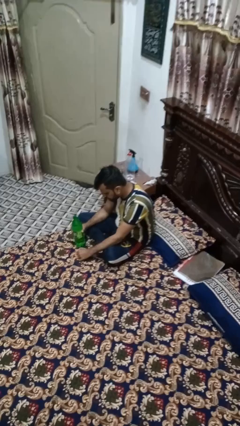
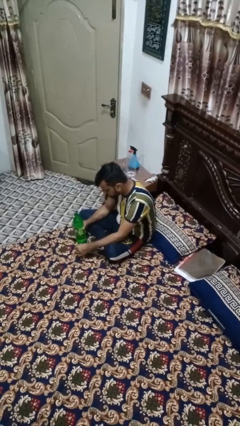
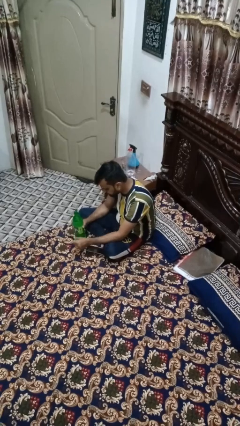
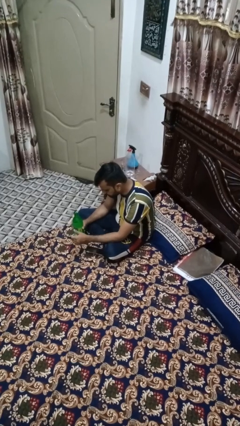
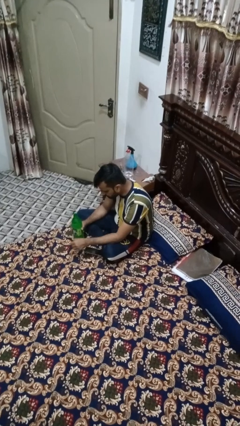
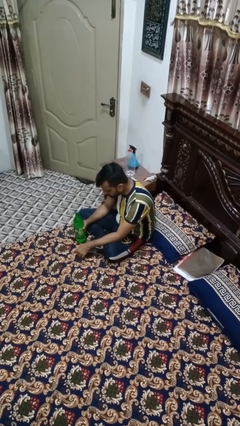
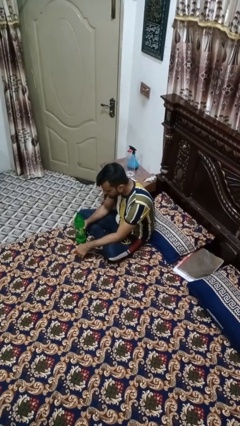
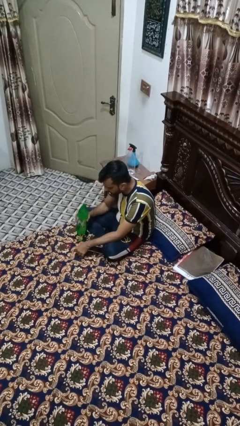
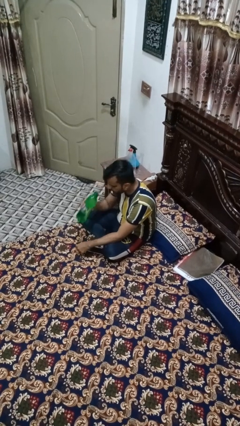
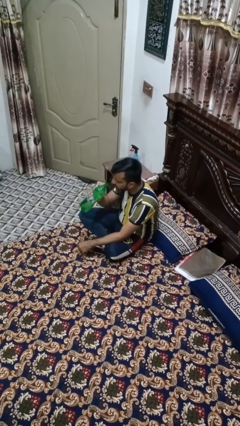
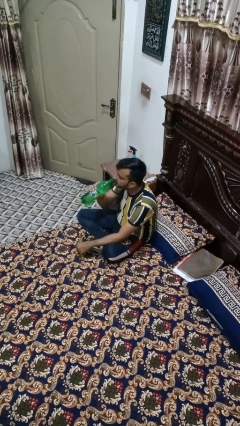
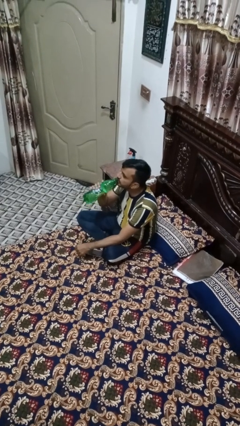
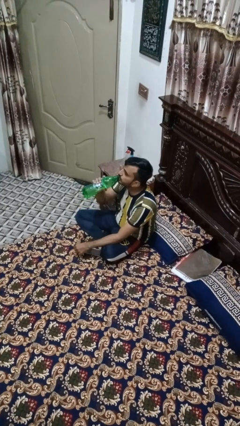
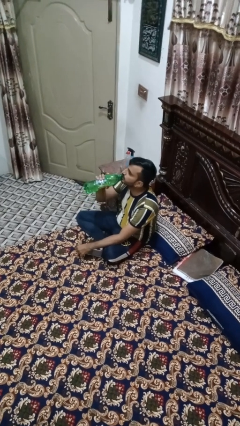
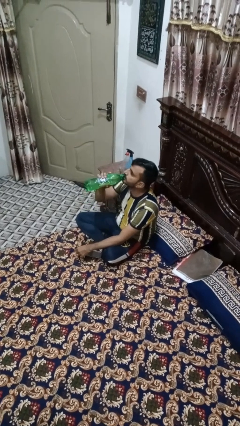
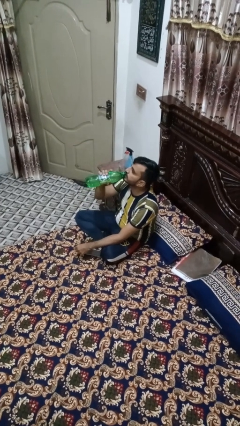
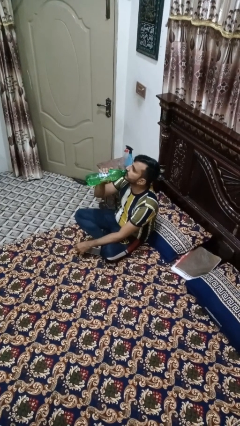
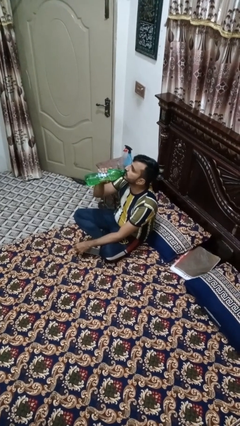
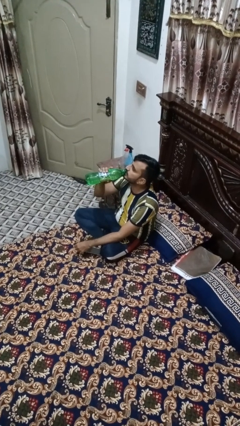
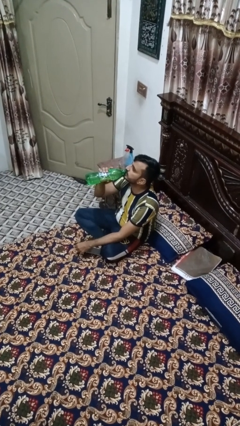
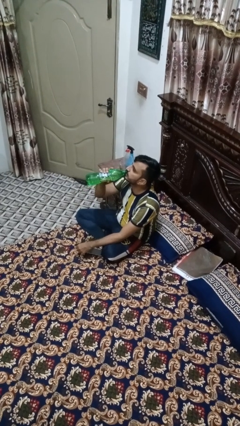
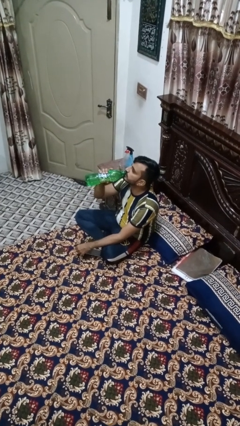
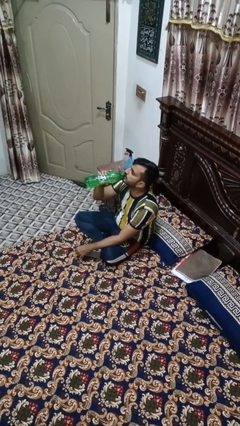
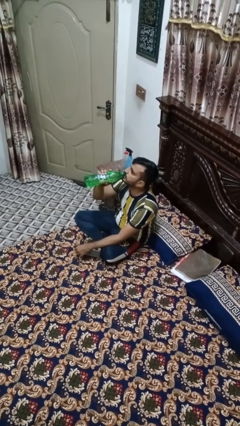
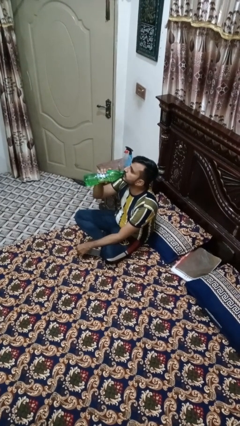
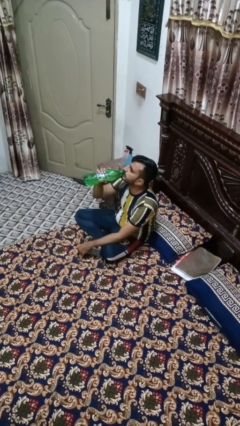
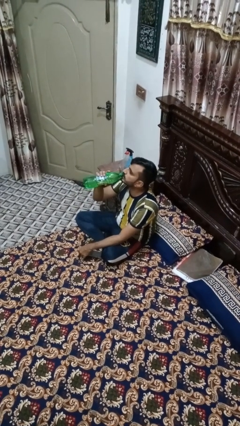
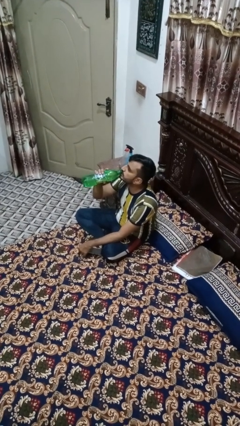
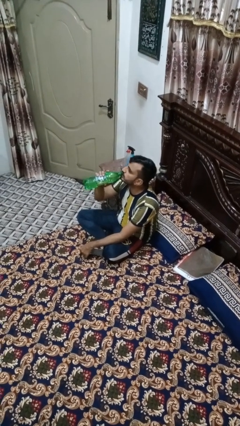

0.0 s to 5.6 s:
person drinks from bottle

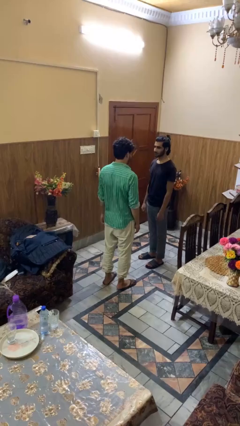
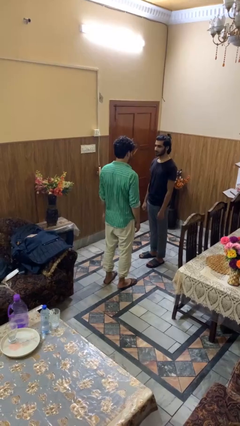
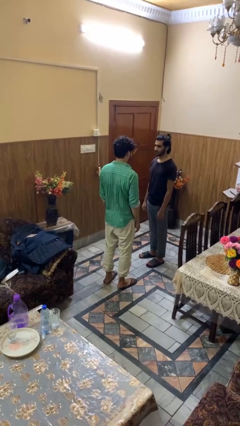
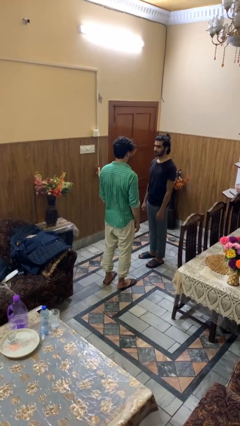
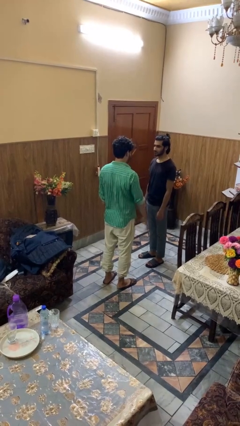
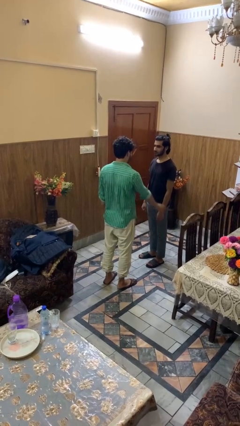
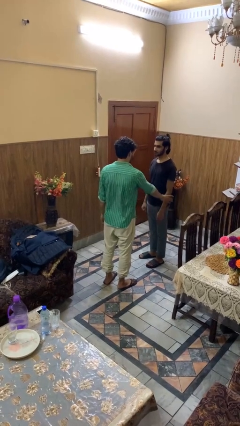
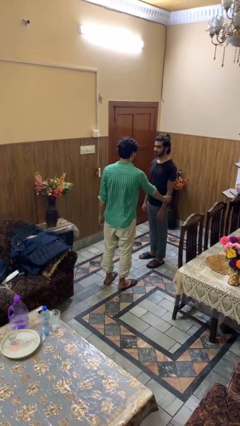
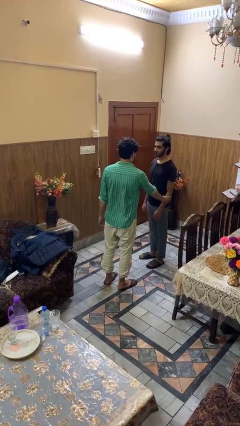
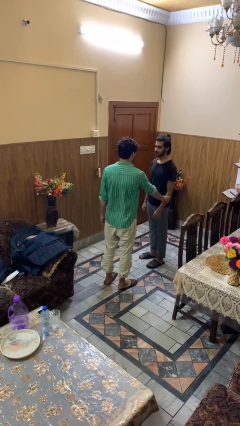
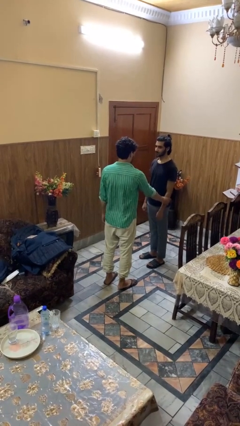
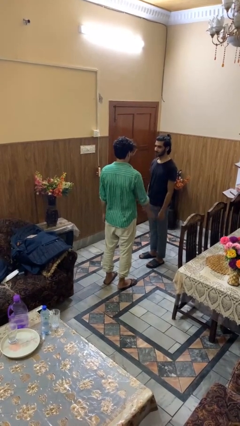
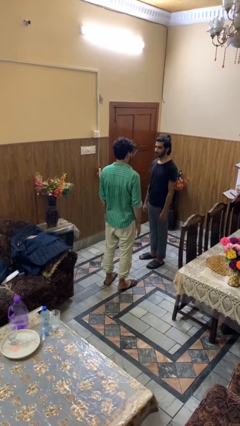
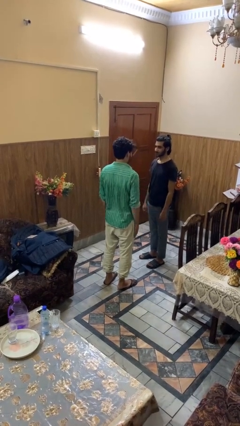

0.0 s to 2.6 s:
person grabs person by forearm

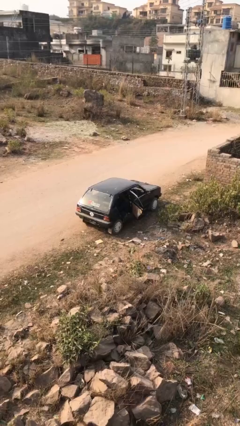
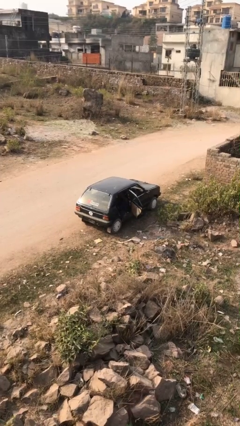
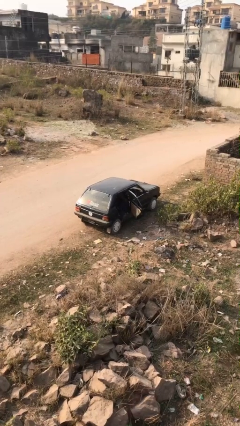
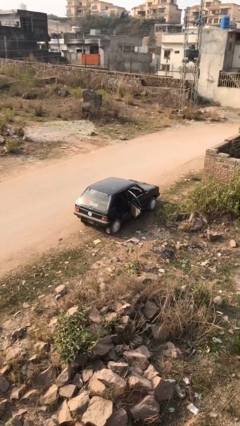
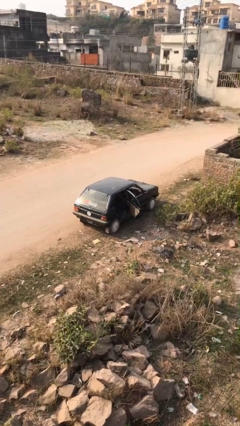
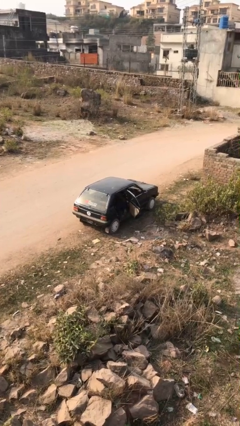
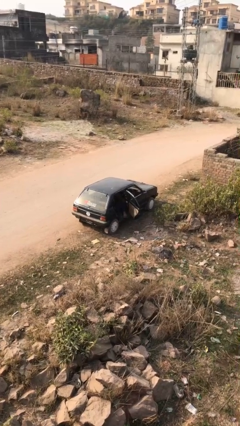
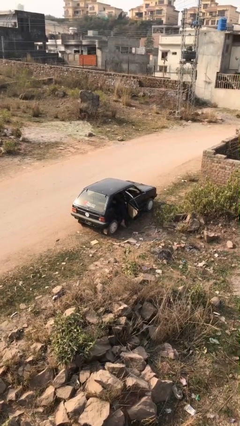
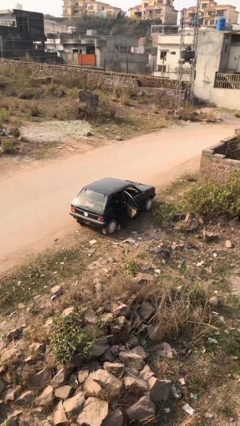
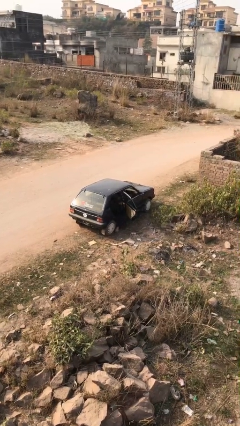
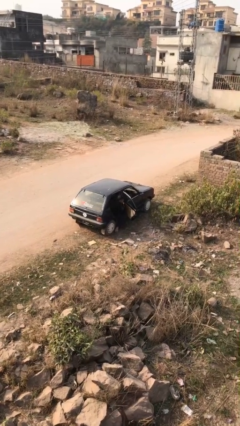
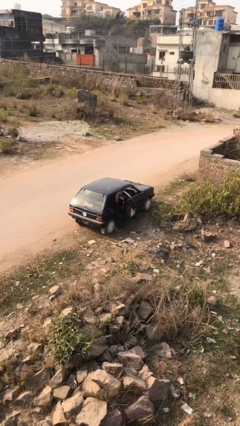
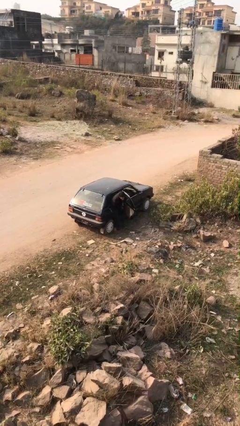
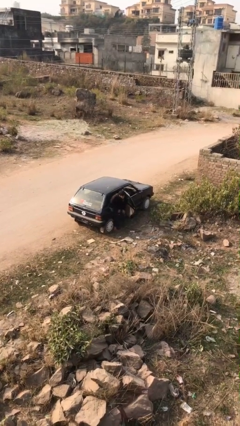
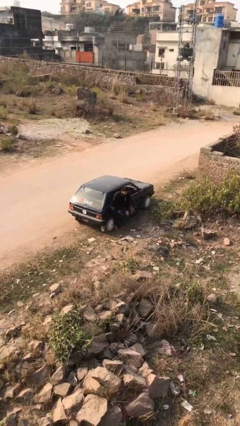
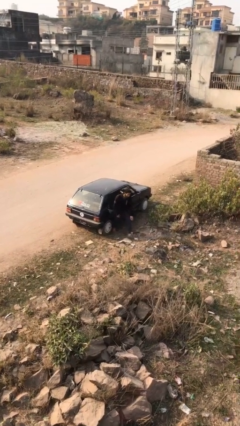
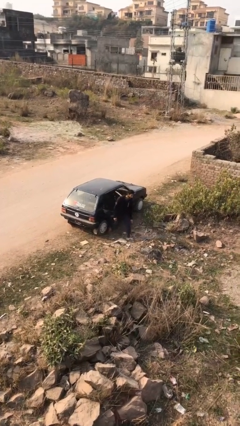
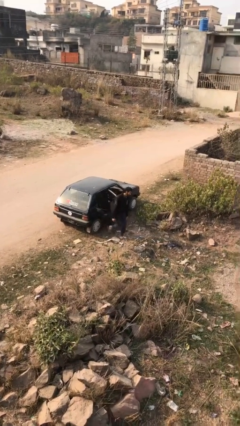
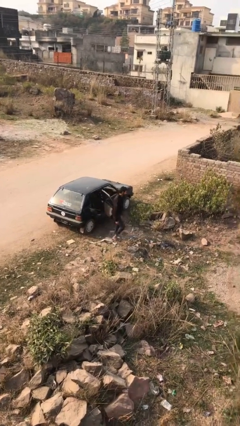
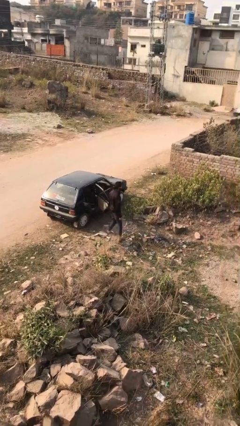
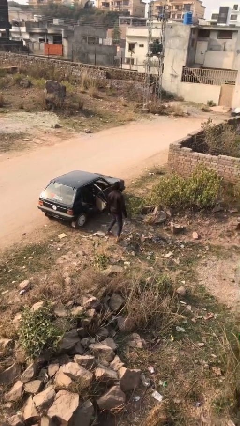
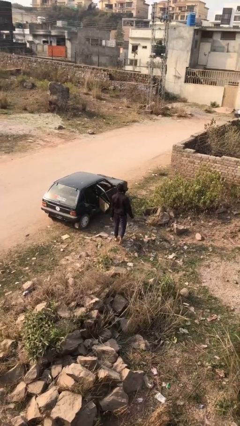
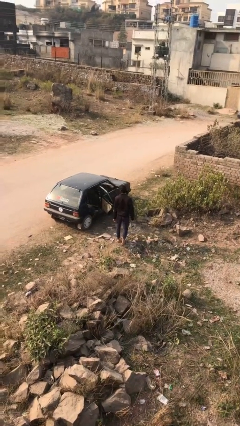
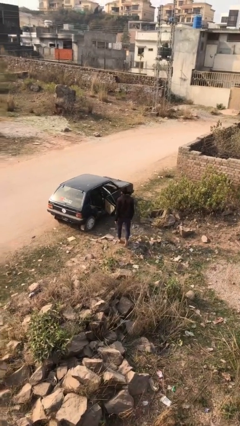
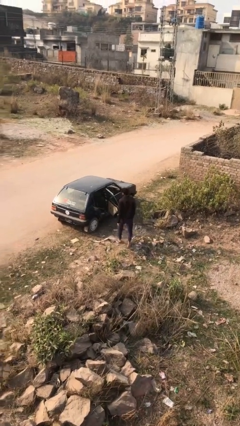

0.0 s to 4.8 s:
person exits car

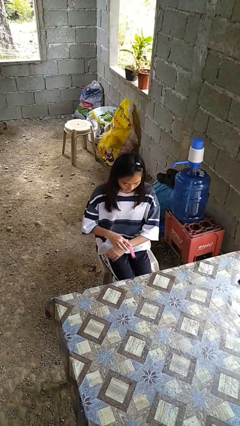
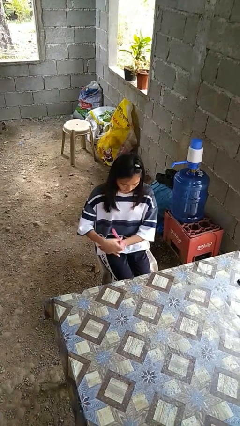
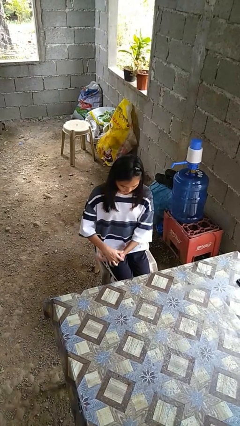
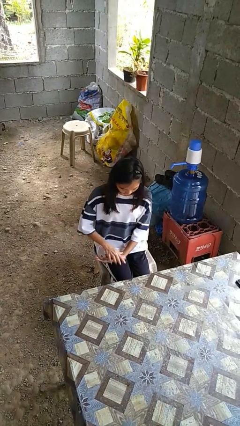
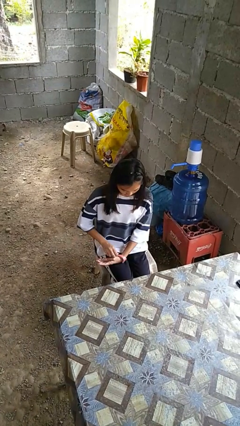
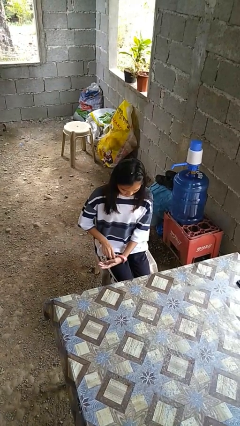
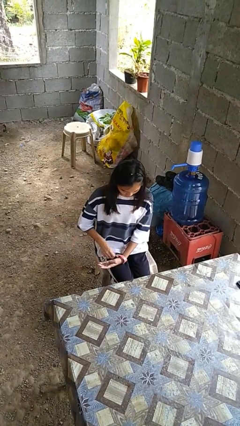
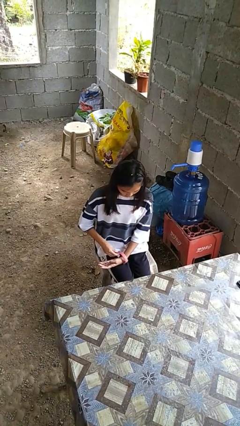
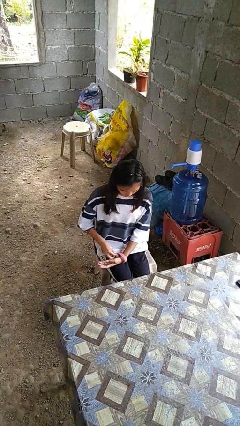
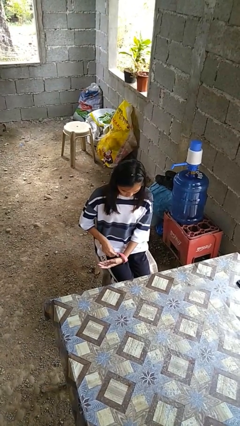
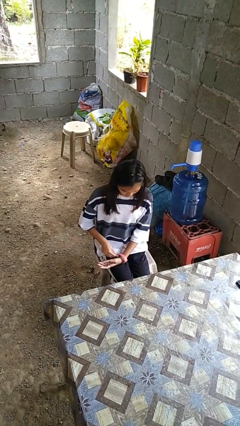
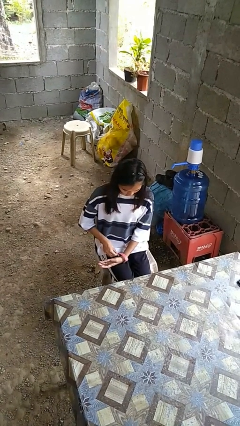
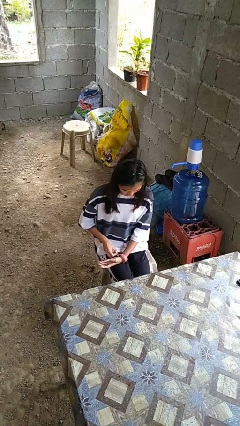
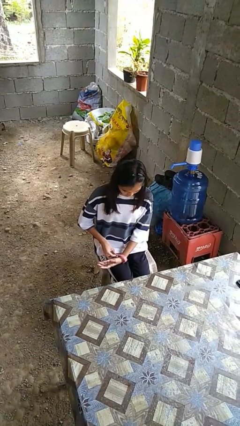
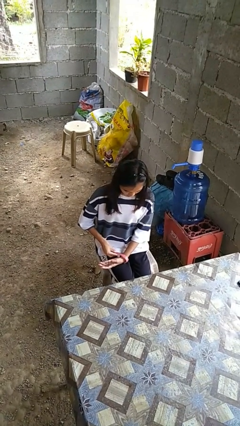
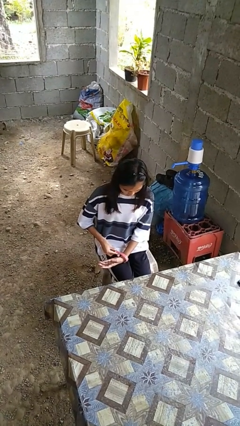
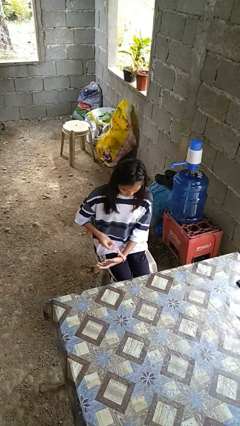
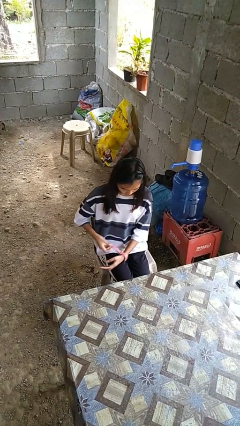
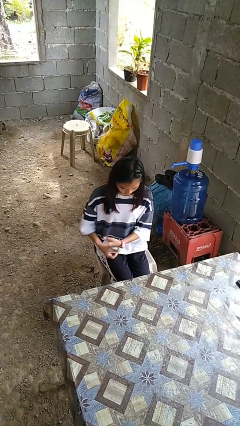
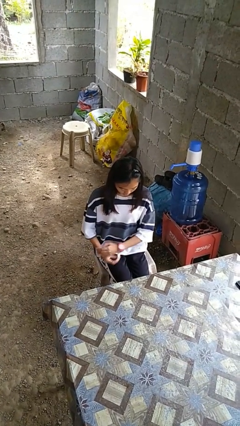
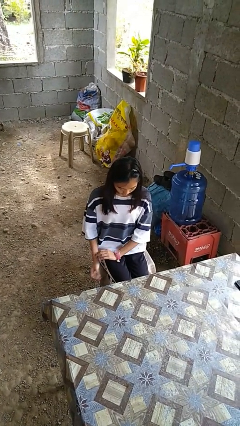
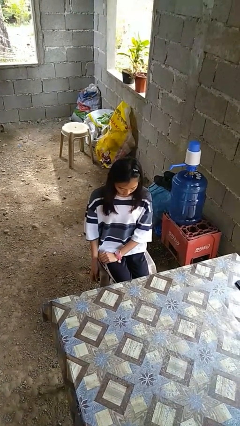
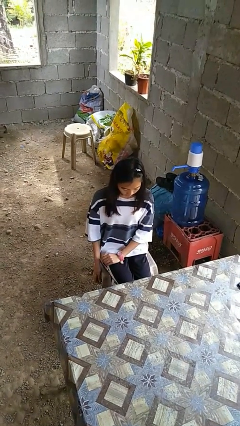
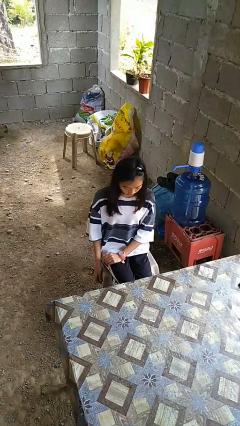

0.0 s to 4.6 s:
person puts on wristwatch

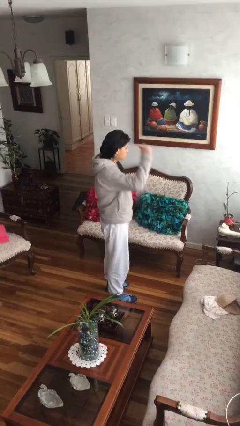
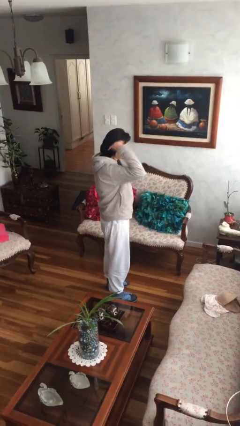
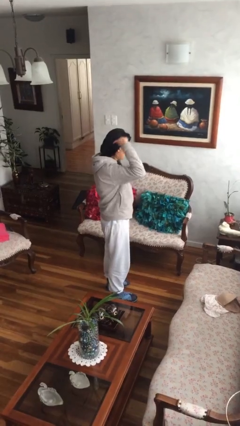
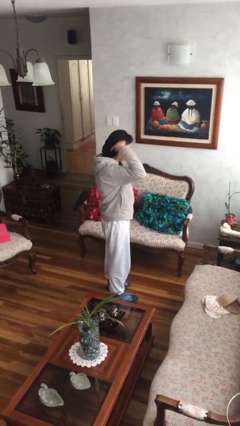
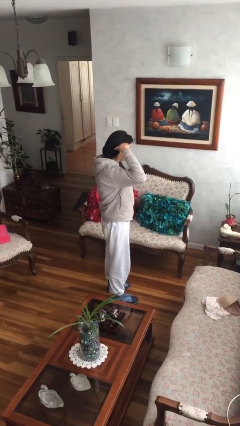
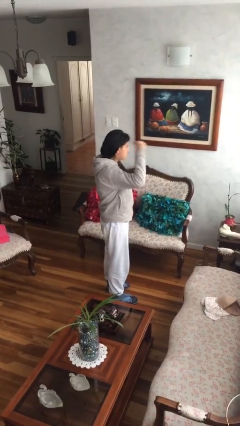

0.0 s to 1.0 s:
person gestures behind me
